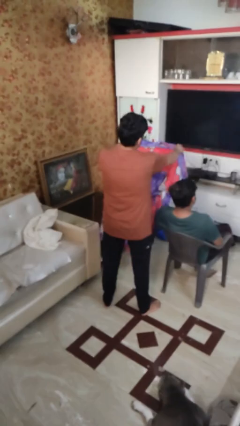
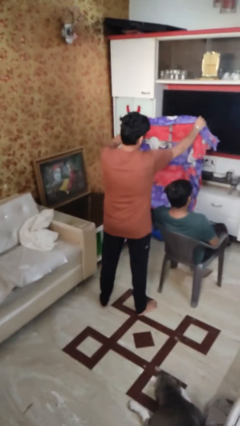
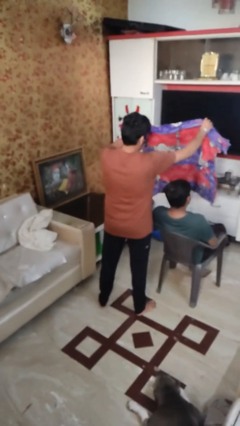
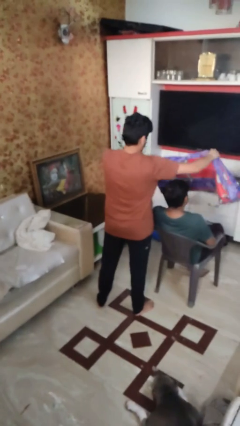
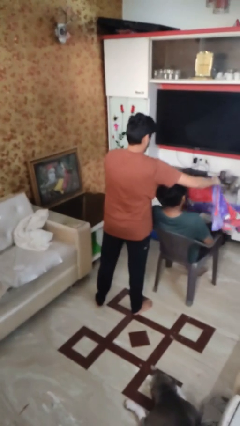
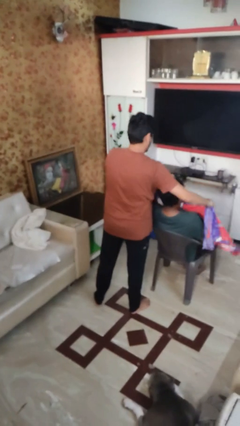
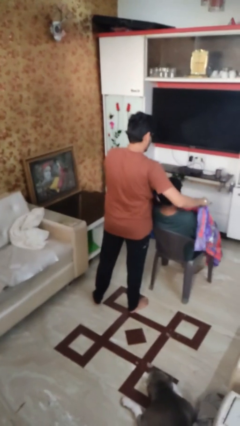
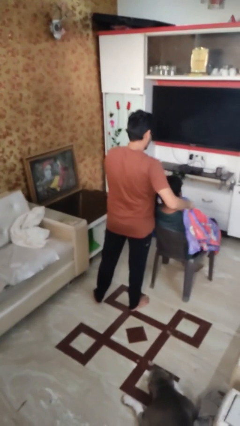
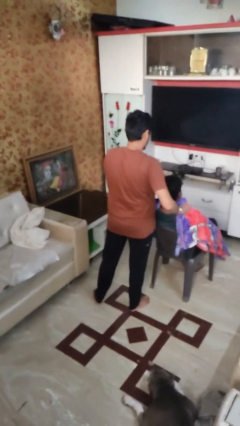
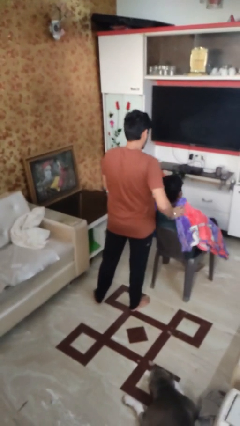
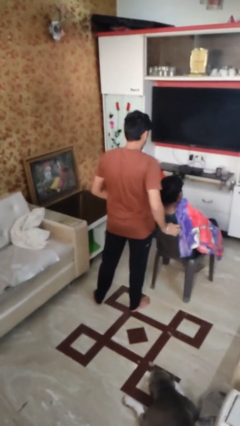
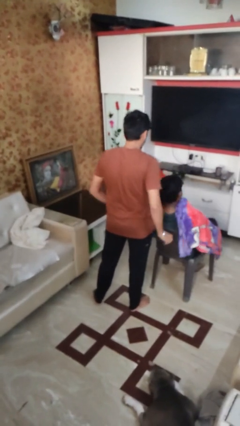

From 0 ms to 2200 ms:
person covers friend with blanket

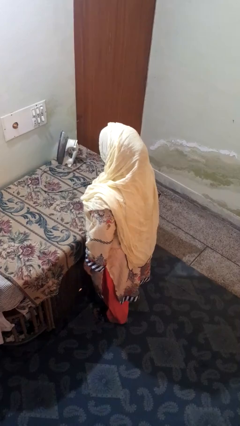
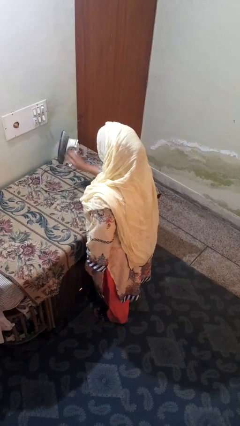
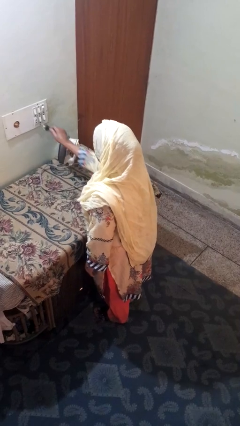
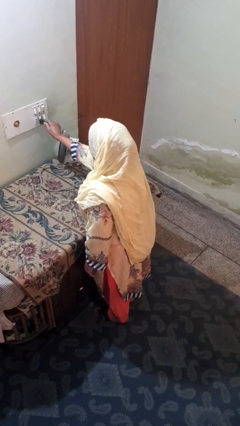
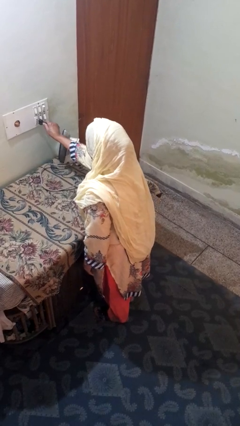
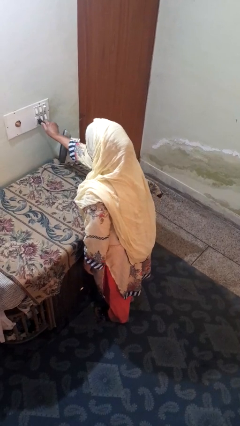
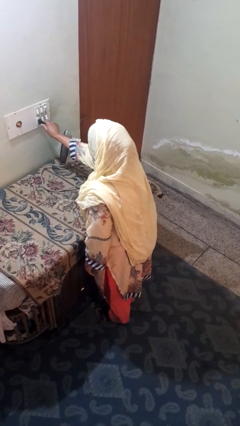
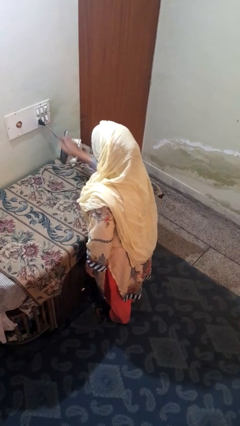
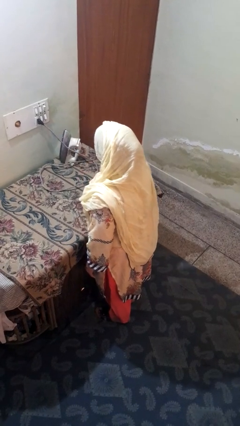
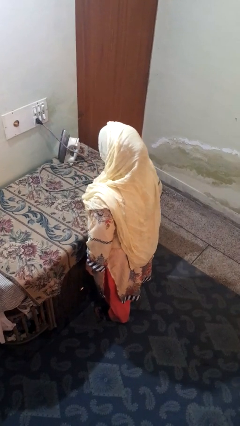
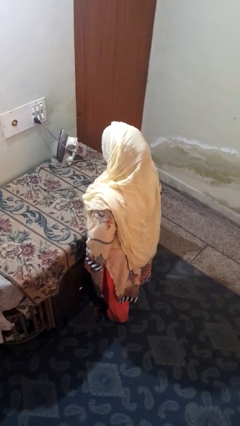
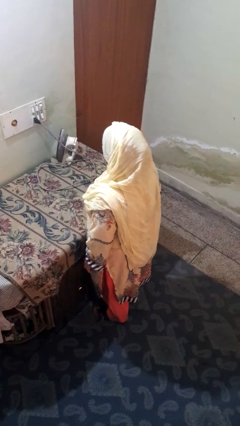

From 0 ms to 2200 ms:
person plugs into electrical socket

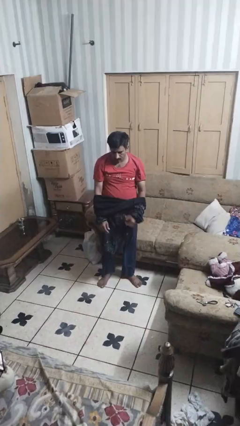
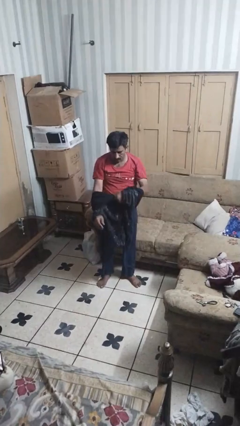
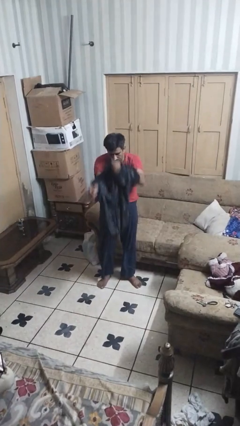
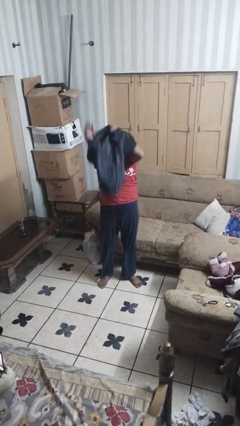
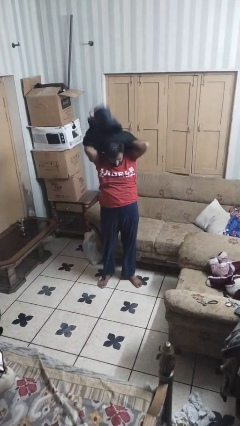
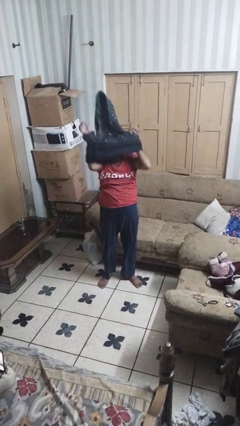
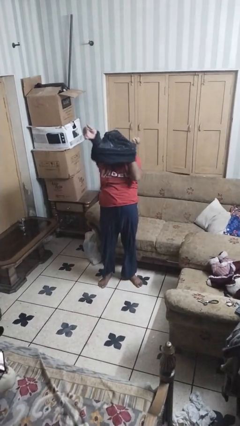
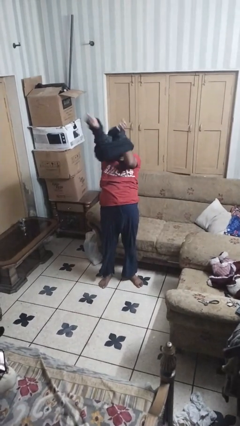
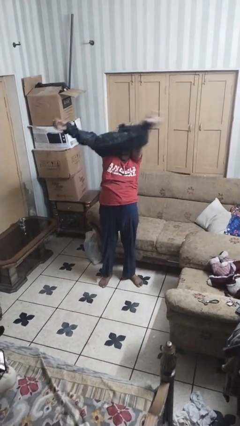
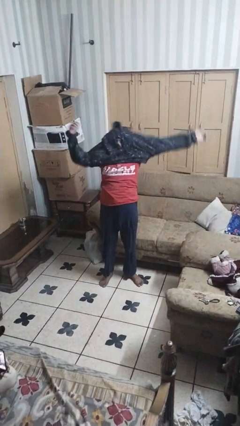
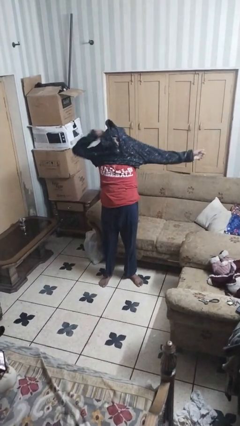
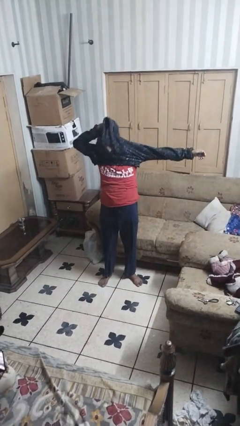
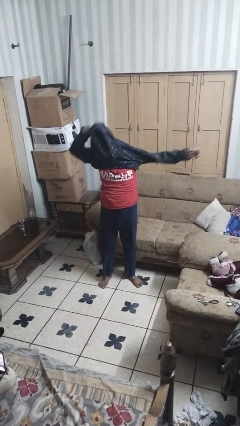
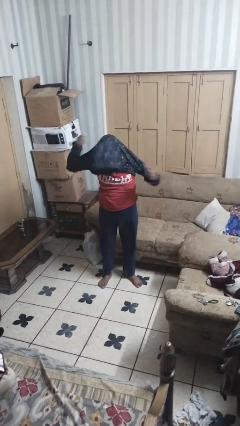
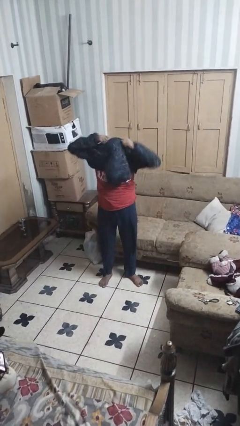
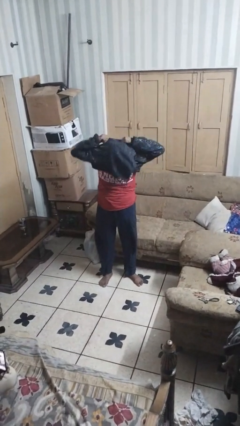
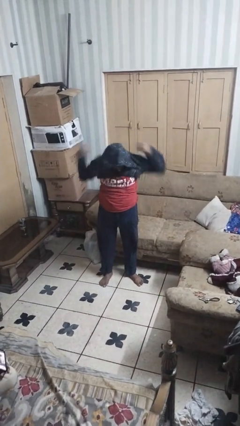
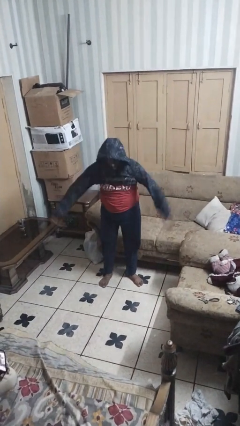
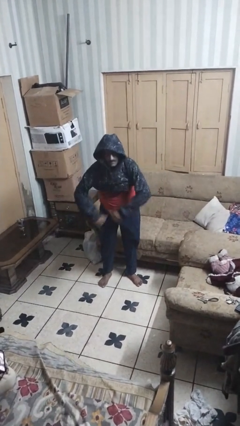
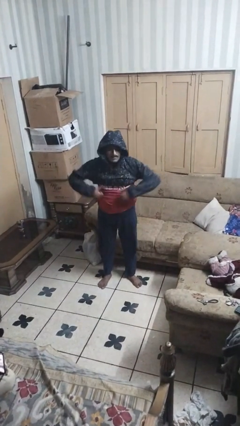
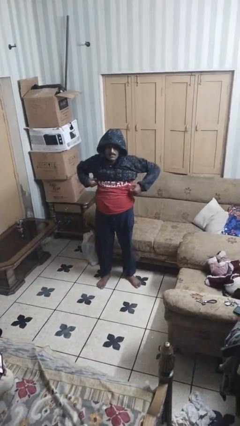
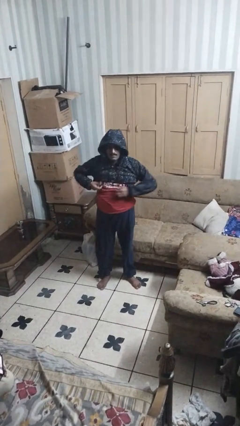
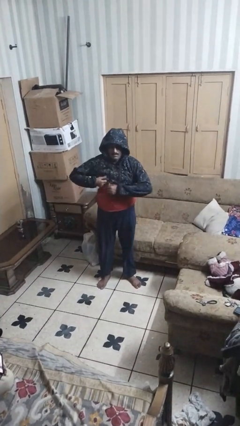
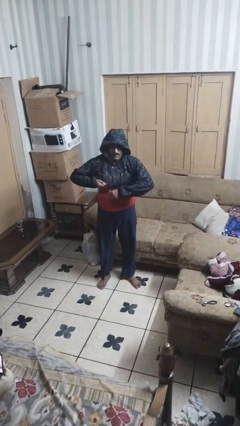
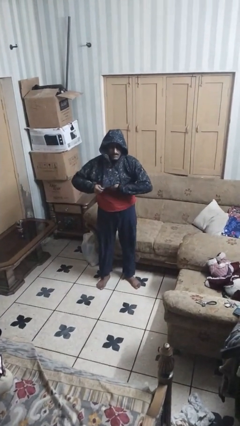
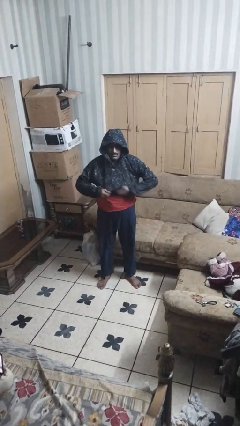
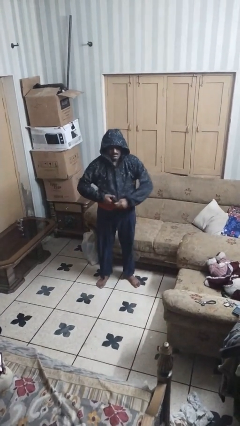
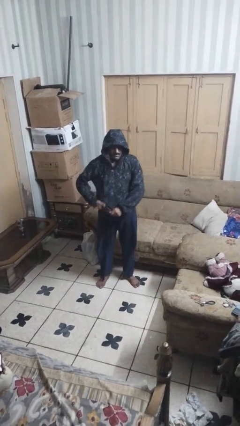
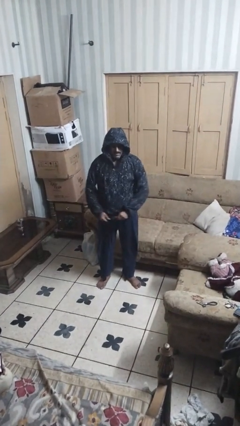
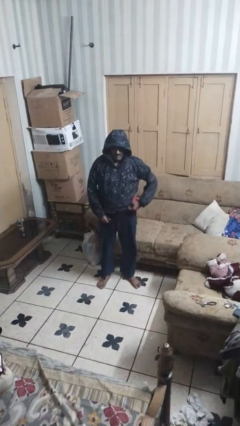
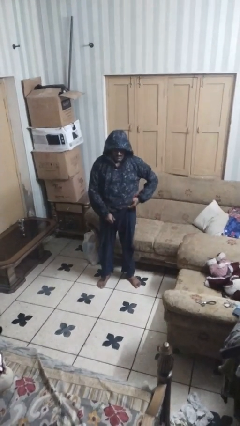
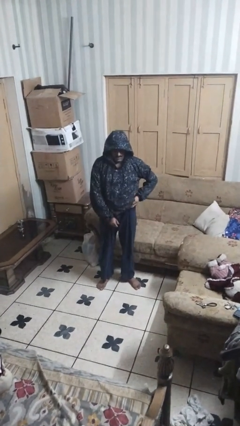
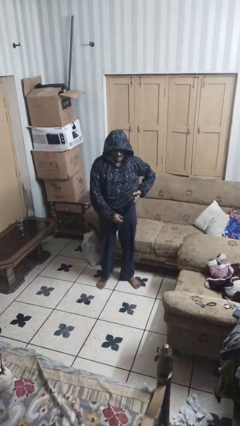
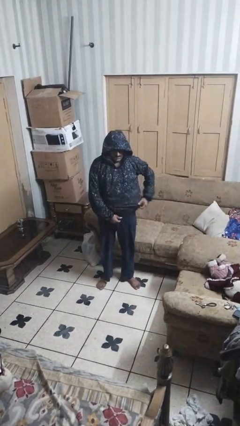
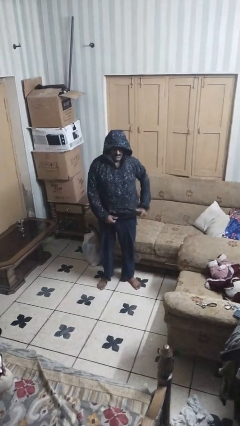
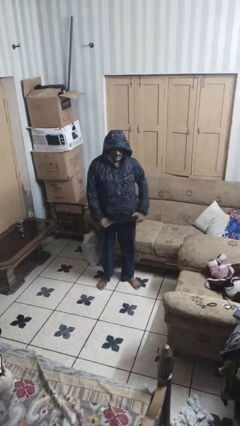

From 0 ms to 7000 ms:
person puts on hoodie

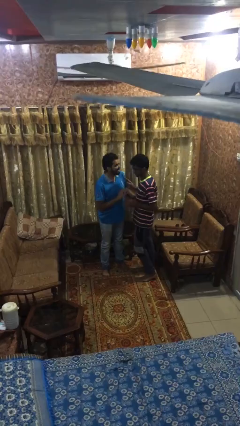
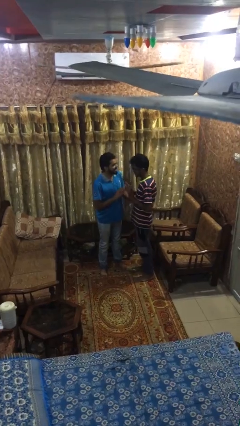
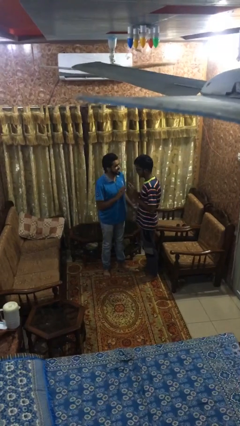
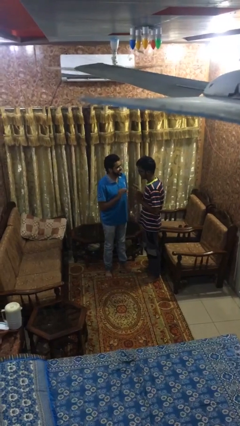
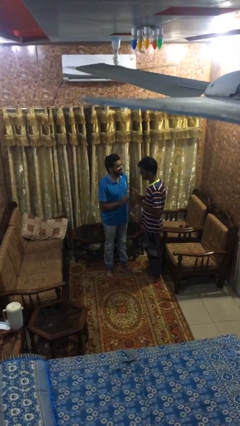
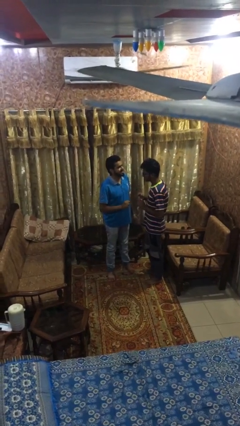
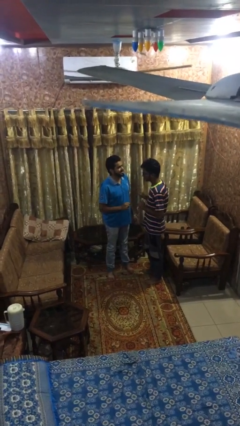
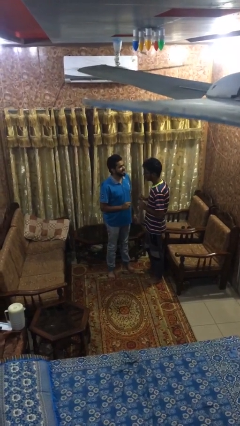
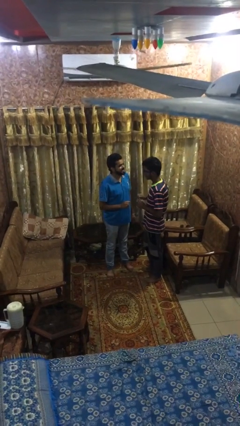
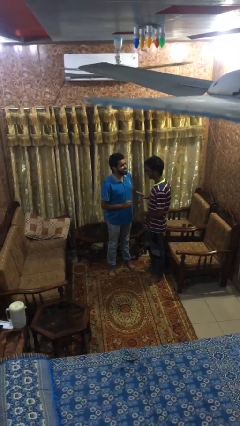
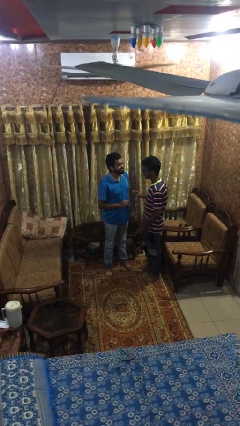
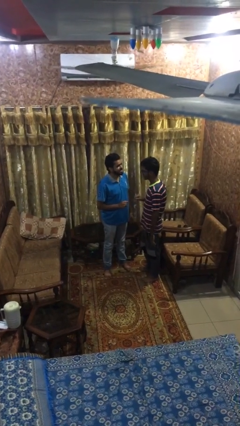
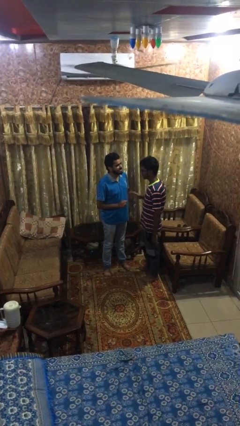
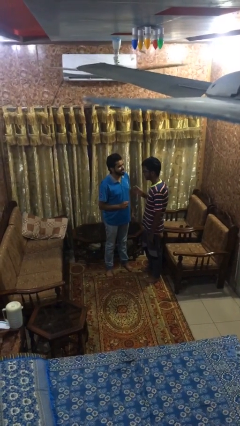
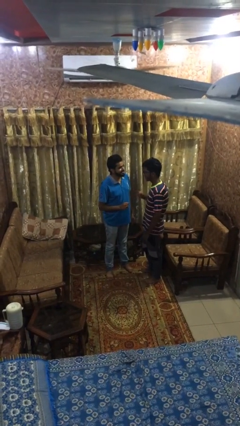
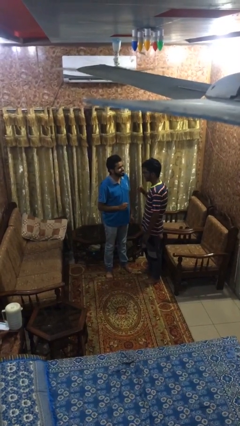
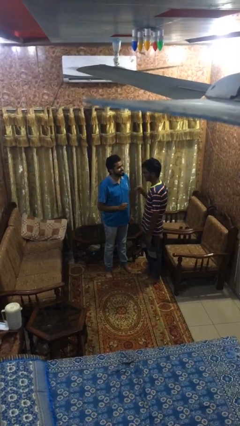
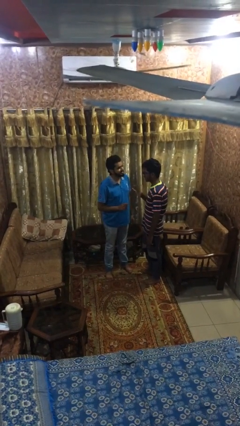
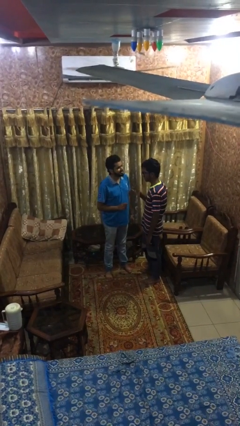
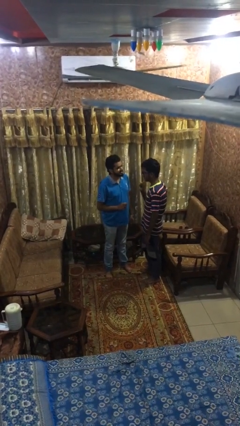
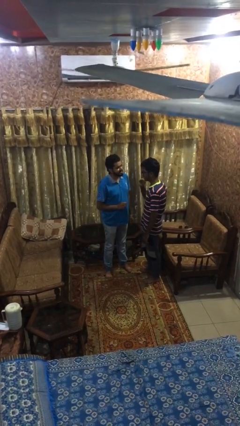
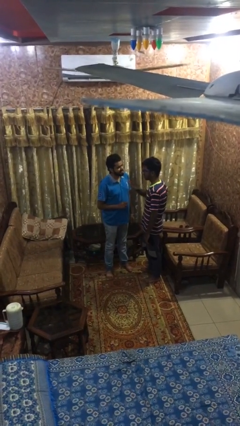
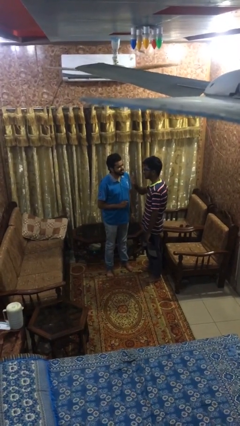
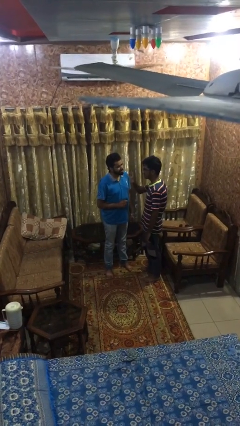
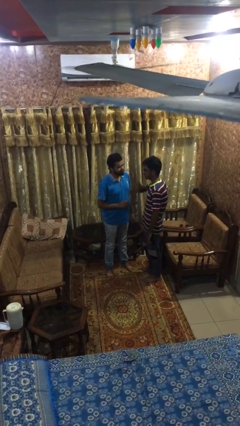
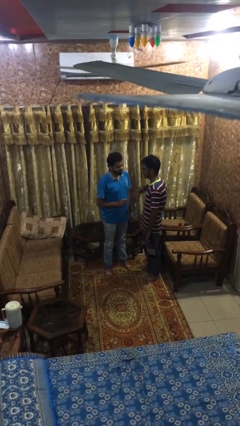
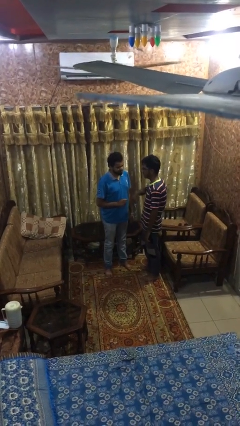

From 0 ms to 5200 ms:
person talks to person

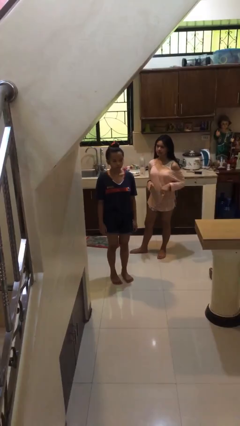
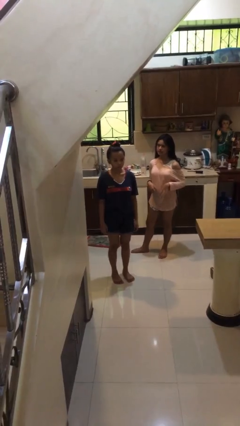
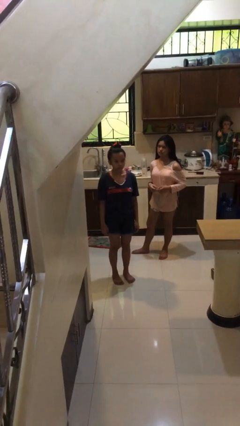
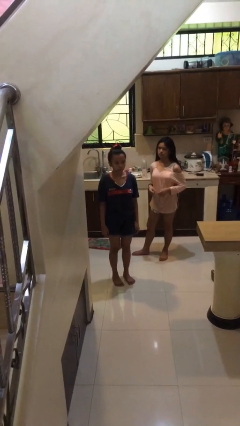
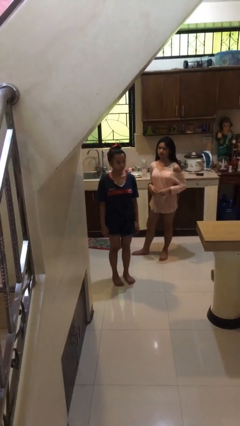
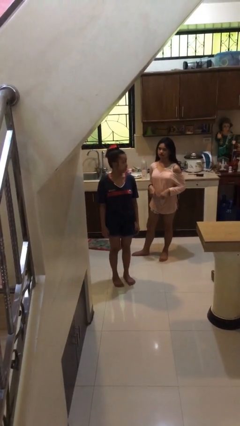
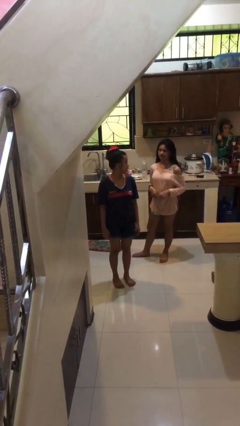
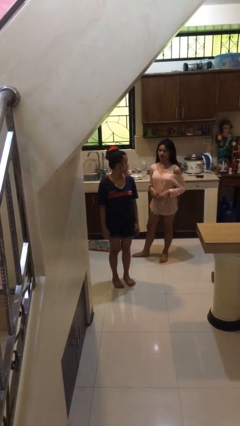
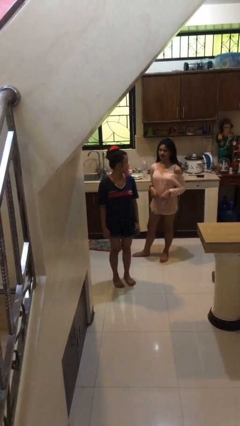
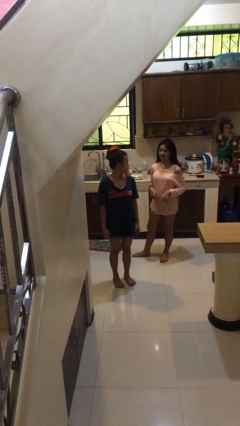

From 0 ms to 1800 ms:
person looks over shoulder
